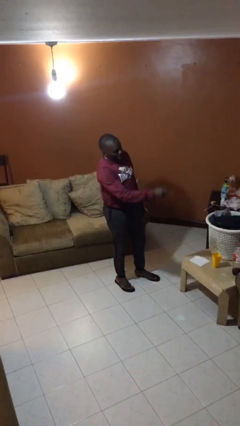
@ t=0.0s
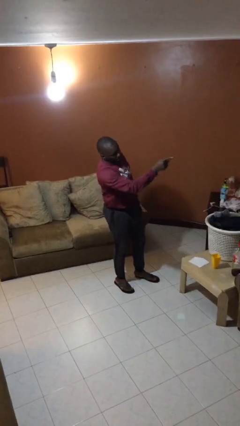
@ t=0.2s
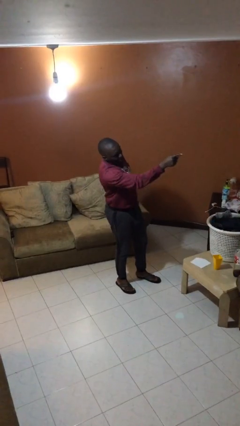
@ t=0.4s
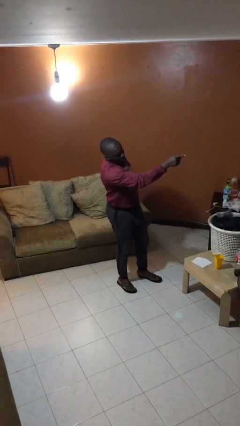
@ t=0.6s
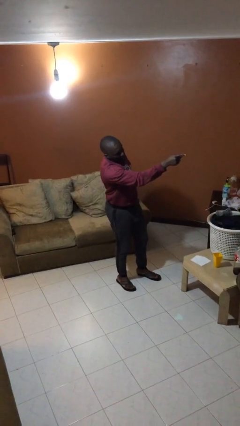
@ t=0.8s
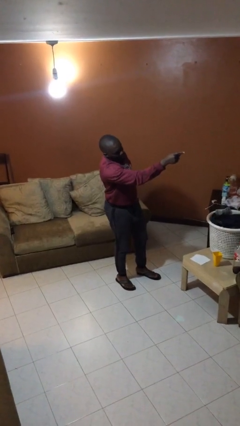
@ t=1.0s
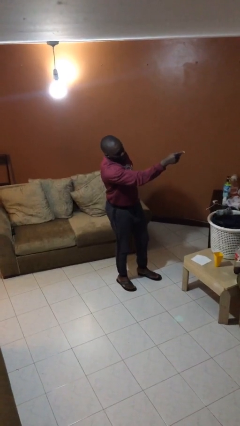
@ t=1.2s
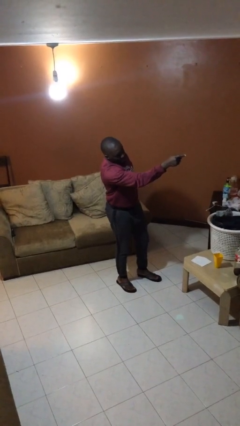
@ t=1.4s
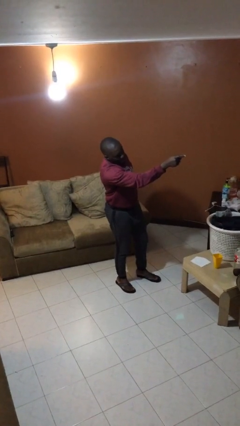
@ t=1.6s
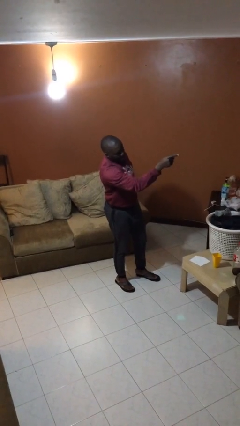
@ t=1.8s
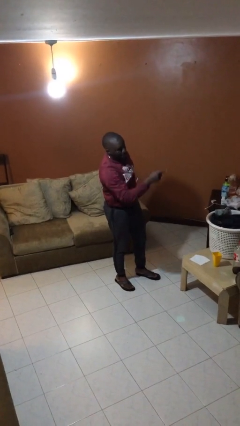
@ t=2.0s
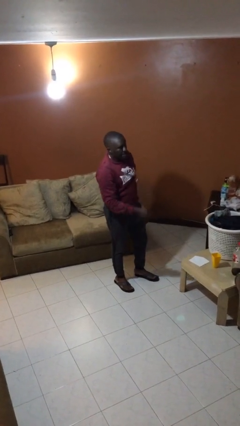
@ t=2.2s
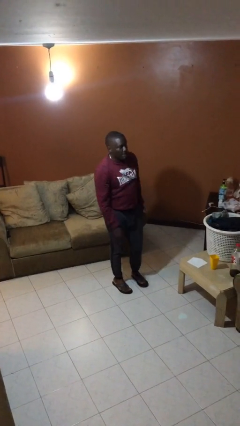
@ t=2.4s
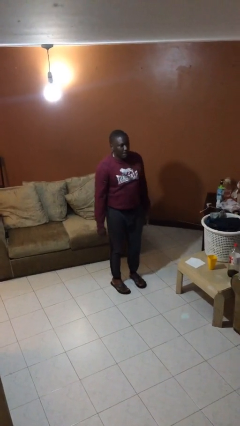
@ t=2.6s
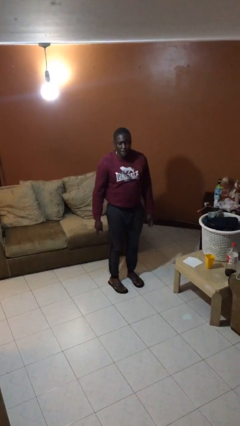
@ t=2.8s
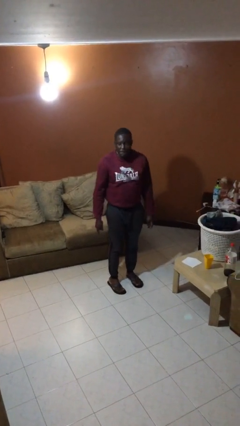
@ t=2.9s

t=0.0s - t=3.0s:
person points at person

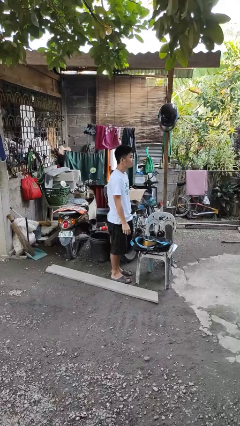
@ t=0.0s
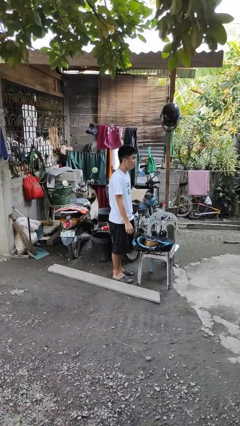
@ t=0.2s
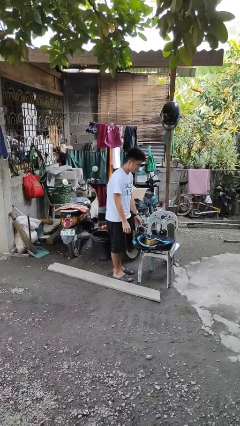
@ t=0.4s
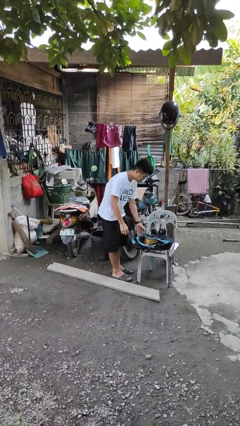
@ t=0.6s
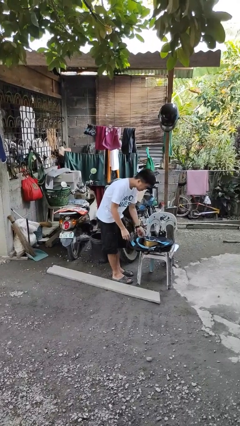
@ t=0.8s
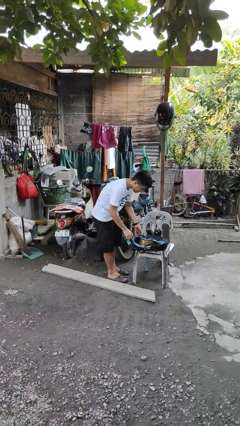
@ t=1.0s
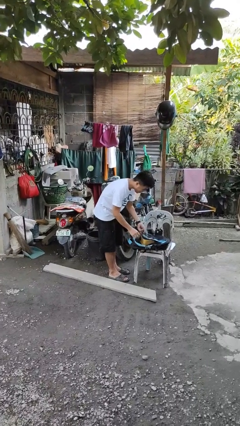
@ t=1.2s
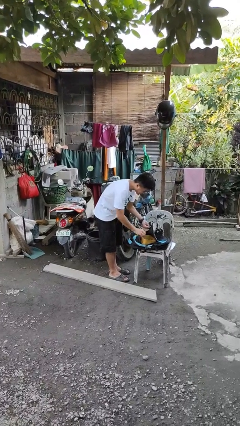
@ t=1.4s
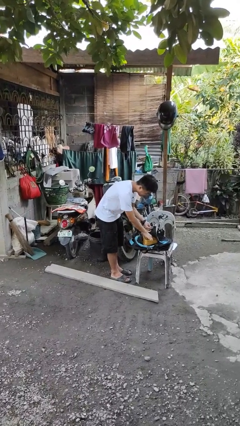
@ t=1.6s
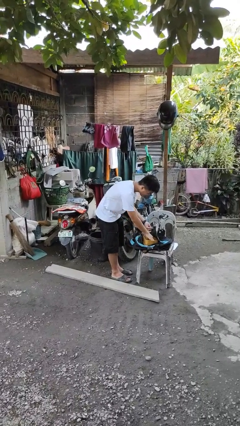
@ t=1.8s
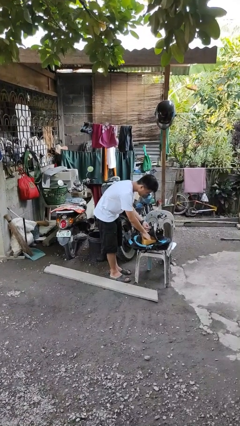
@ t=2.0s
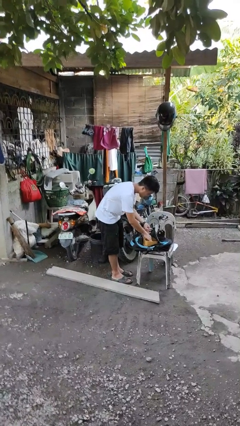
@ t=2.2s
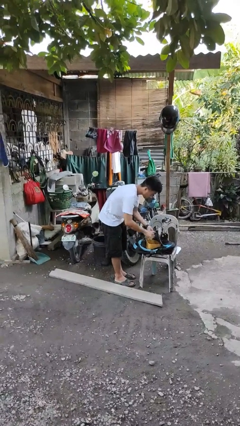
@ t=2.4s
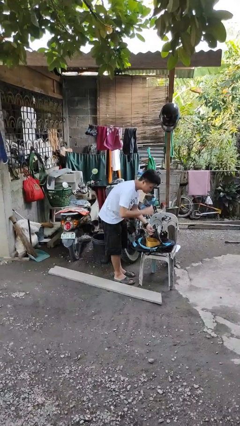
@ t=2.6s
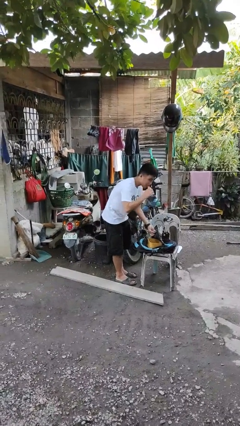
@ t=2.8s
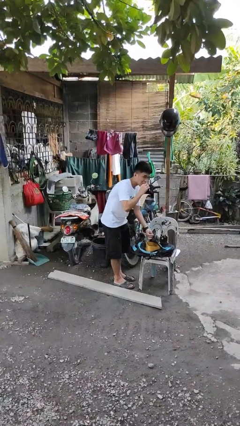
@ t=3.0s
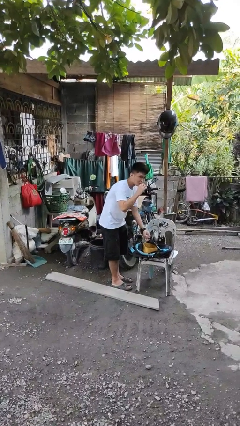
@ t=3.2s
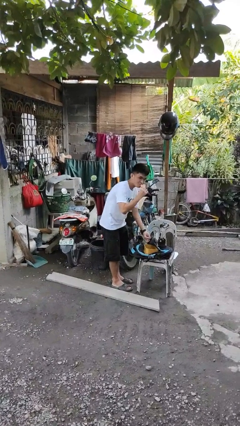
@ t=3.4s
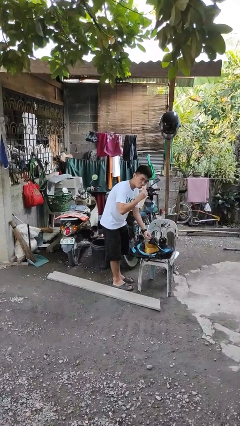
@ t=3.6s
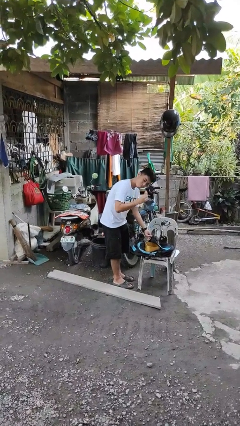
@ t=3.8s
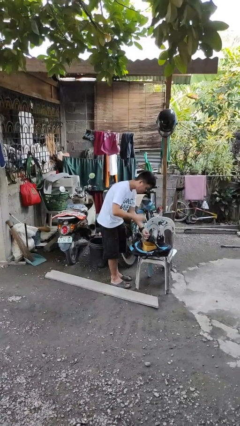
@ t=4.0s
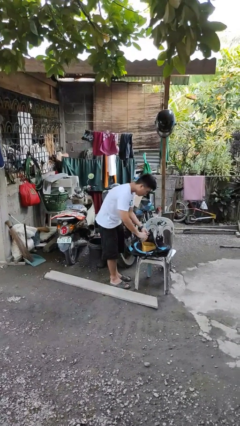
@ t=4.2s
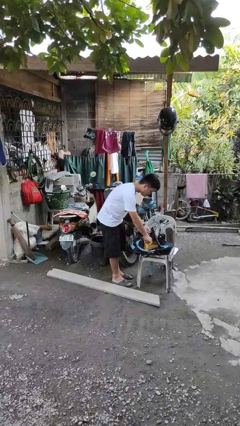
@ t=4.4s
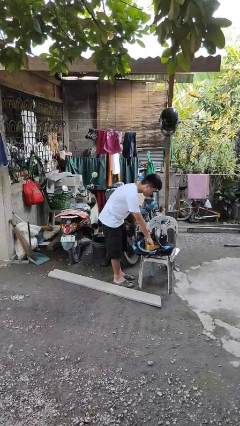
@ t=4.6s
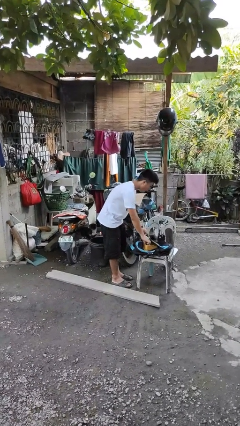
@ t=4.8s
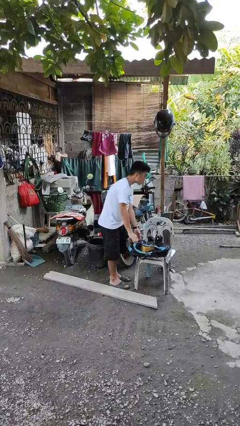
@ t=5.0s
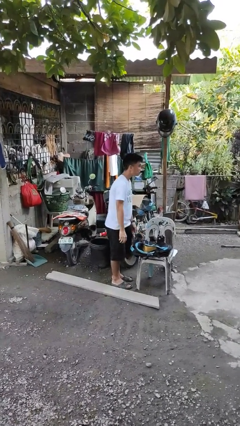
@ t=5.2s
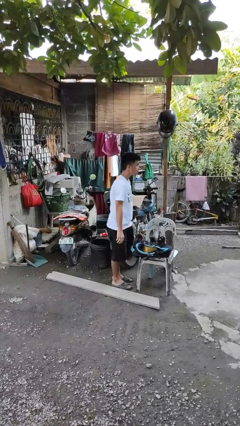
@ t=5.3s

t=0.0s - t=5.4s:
person eats snack from bag

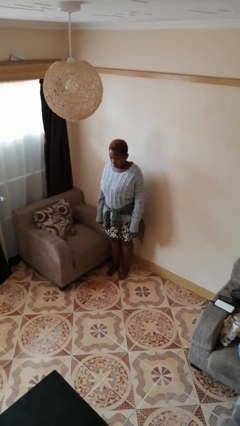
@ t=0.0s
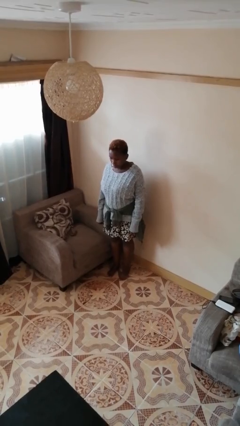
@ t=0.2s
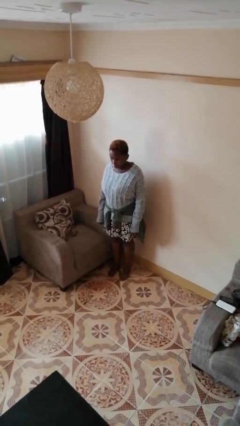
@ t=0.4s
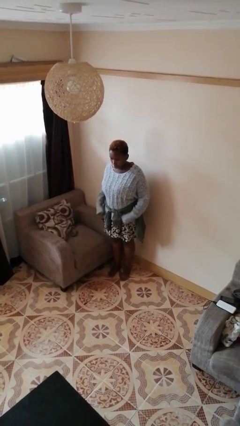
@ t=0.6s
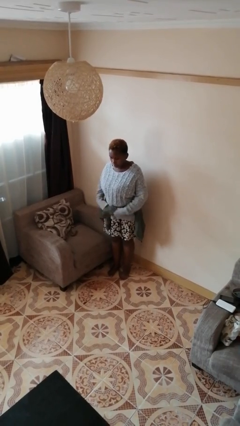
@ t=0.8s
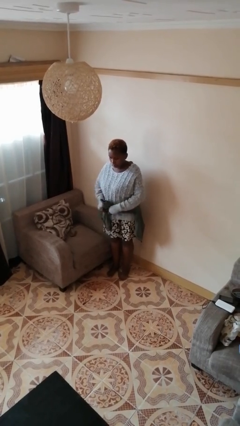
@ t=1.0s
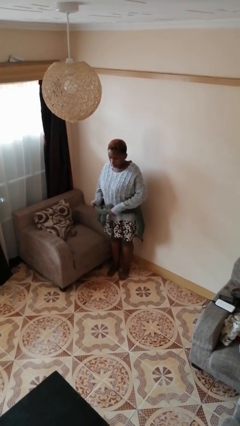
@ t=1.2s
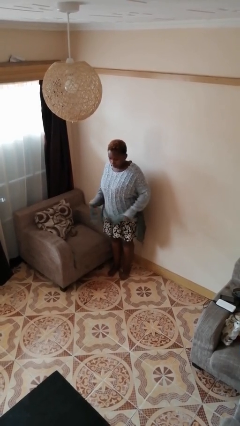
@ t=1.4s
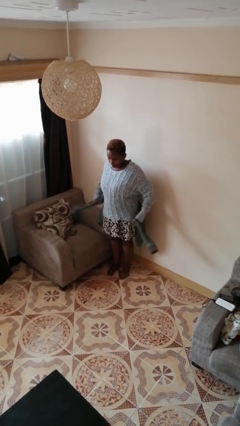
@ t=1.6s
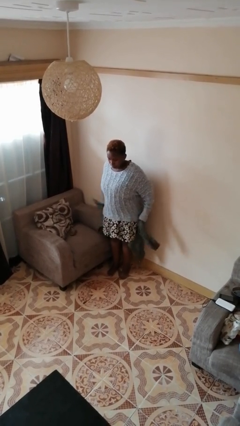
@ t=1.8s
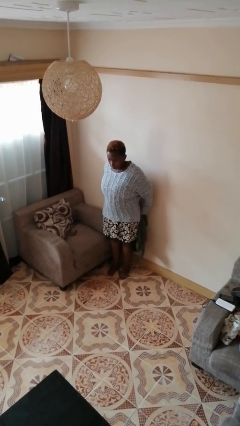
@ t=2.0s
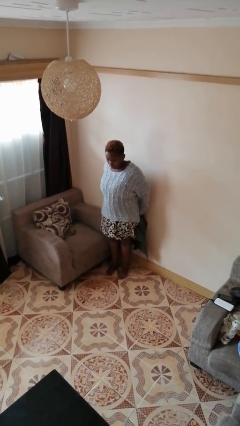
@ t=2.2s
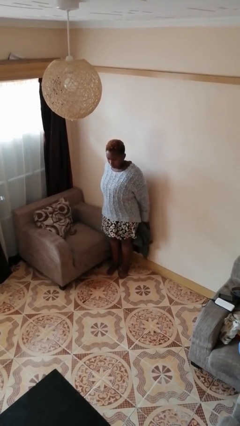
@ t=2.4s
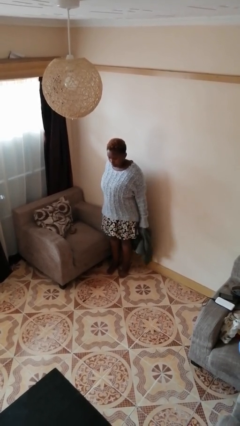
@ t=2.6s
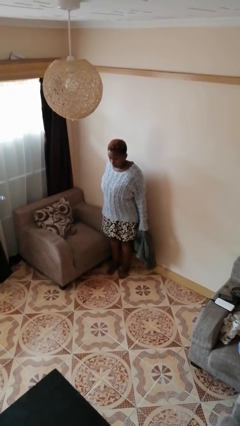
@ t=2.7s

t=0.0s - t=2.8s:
person unties jacket around waist

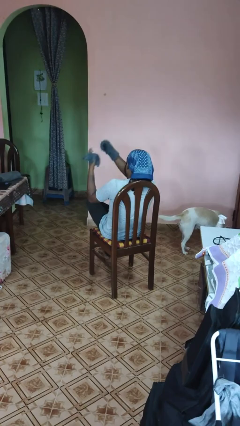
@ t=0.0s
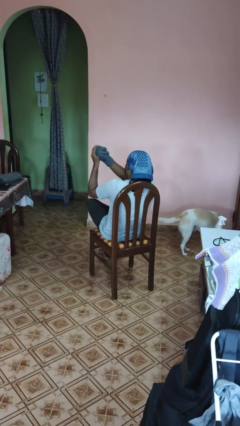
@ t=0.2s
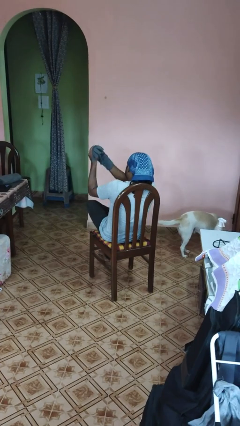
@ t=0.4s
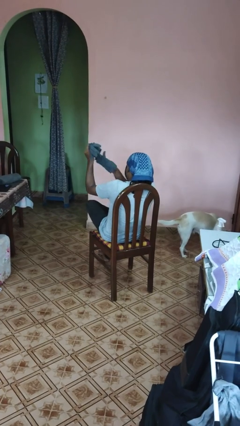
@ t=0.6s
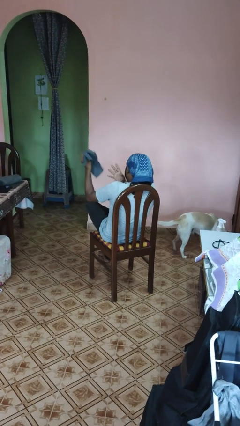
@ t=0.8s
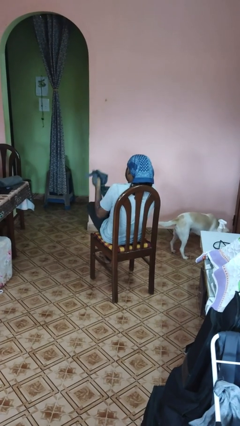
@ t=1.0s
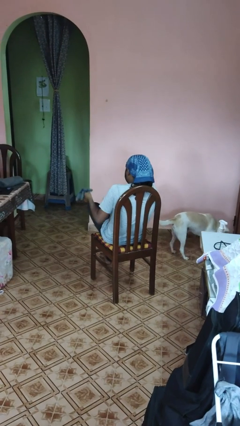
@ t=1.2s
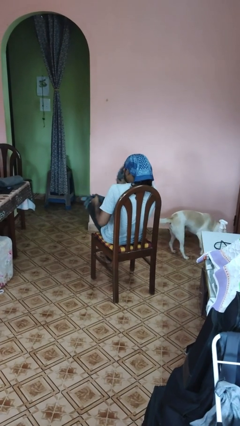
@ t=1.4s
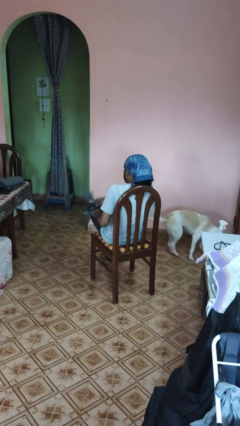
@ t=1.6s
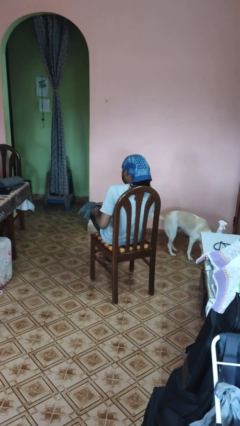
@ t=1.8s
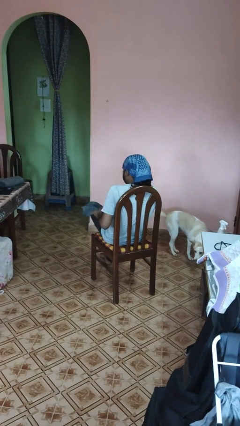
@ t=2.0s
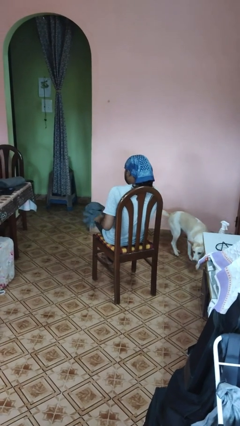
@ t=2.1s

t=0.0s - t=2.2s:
person takes off gloves

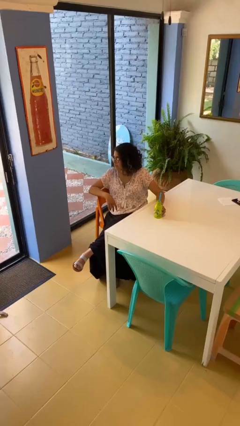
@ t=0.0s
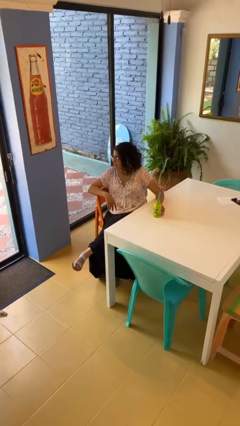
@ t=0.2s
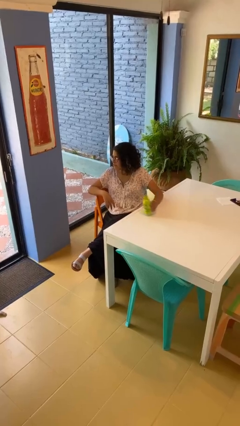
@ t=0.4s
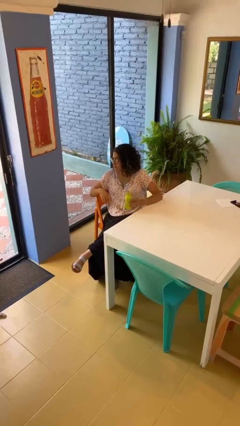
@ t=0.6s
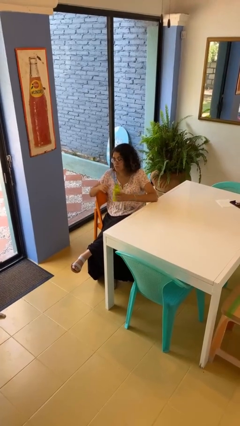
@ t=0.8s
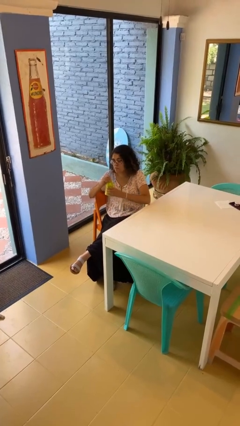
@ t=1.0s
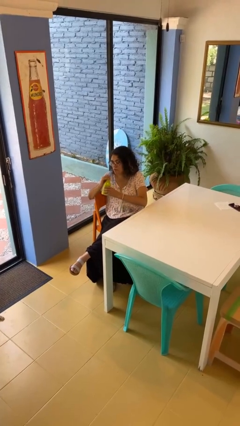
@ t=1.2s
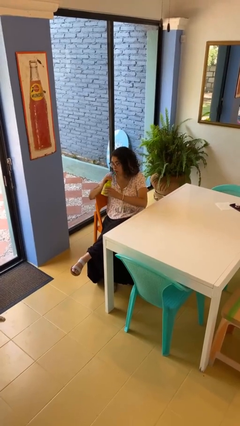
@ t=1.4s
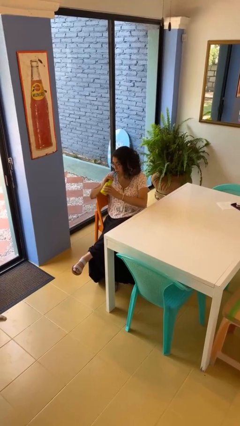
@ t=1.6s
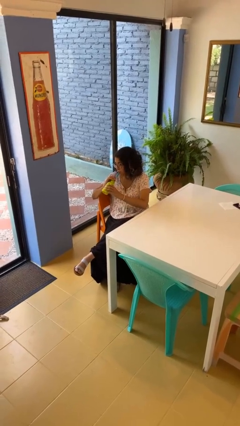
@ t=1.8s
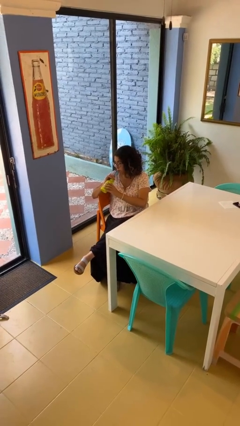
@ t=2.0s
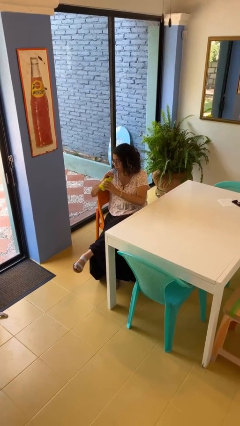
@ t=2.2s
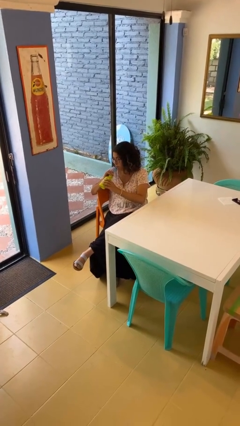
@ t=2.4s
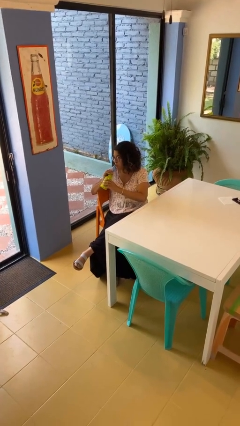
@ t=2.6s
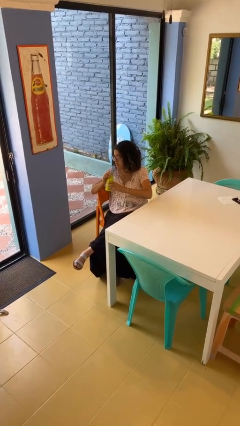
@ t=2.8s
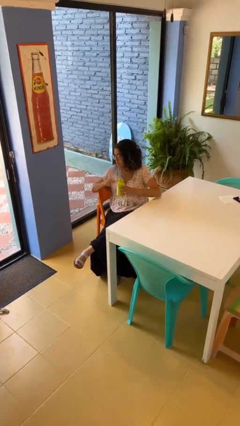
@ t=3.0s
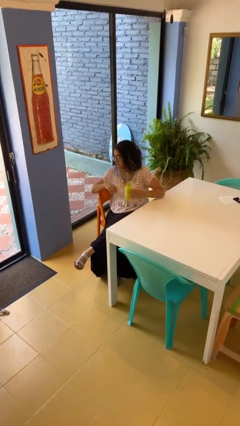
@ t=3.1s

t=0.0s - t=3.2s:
person drinks from straw

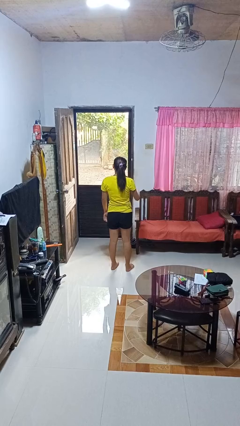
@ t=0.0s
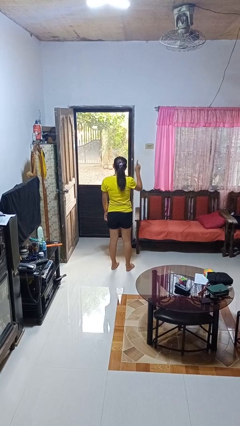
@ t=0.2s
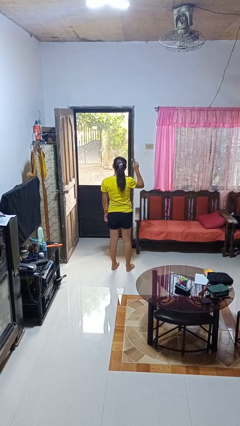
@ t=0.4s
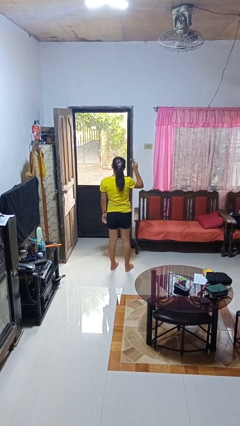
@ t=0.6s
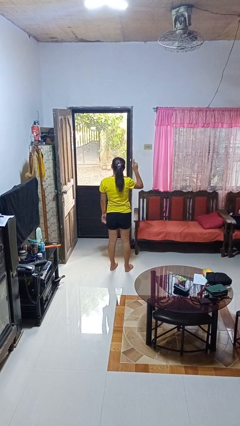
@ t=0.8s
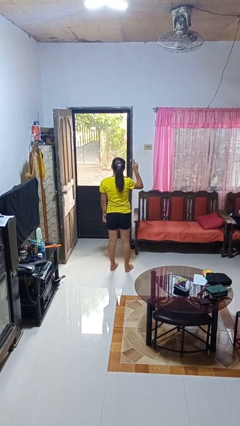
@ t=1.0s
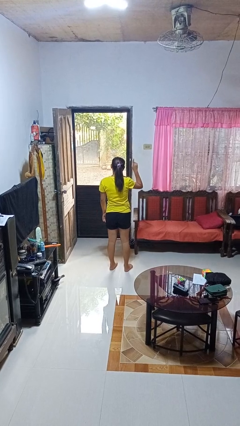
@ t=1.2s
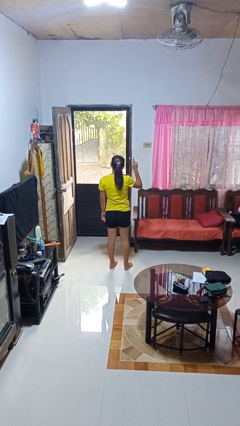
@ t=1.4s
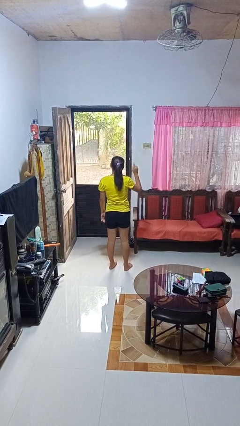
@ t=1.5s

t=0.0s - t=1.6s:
person gestures number one
